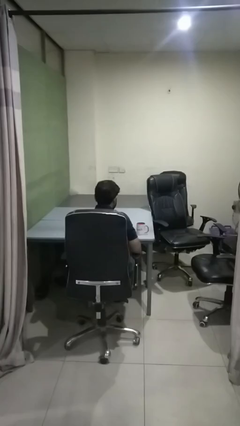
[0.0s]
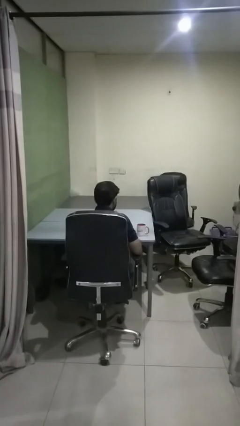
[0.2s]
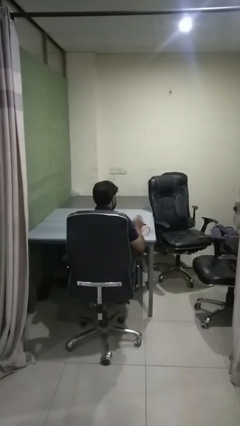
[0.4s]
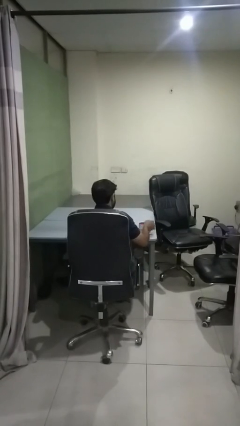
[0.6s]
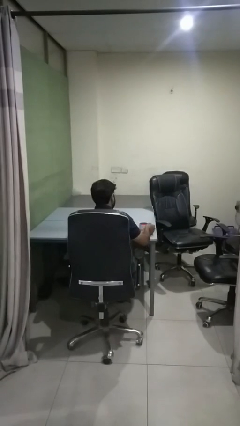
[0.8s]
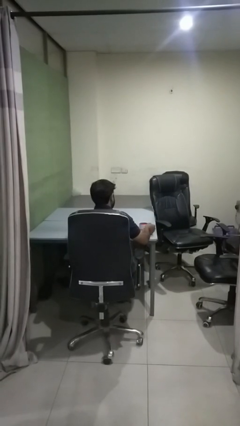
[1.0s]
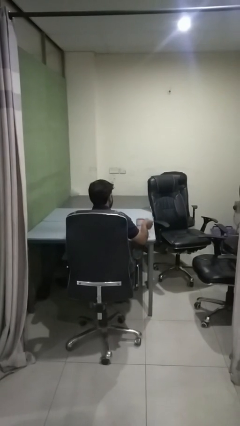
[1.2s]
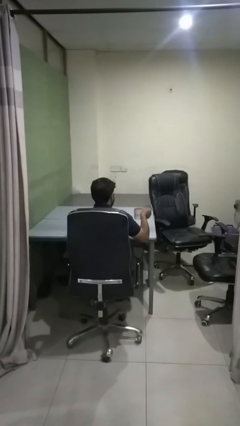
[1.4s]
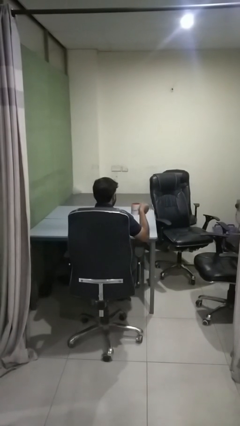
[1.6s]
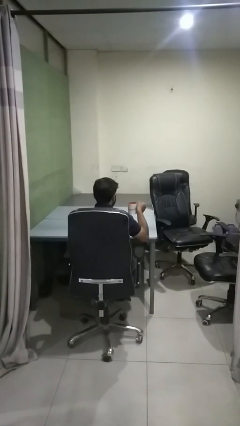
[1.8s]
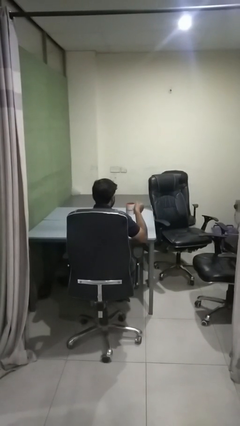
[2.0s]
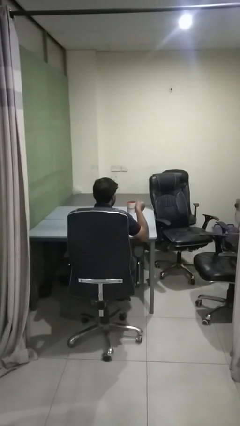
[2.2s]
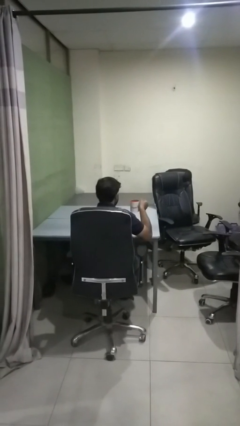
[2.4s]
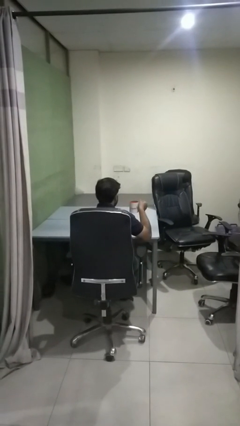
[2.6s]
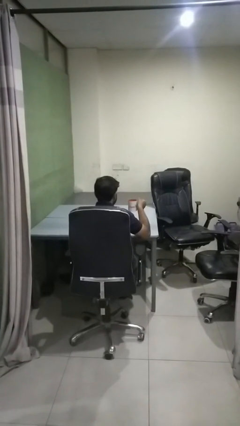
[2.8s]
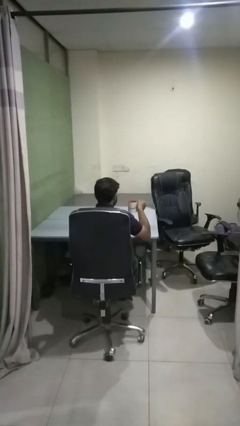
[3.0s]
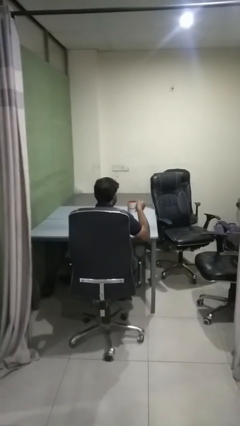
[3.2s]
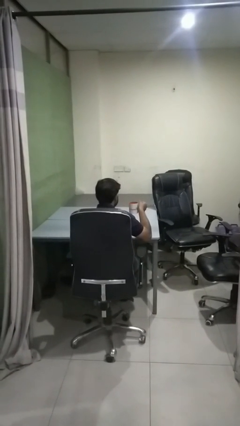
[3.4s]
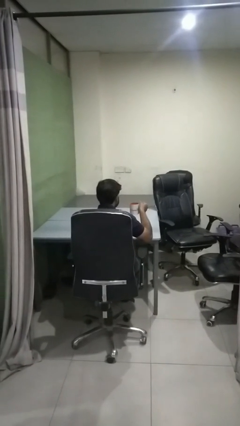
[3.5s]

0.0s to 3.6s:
person picks up object from table

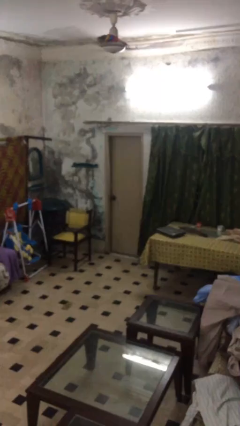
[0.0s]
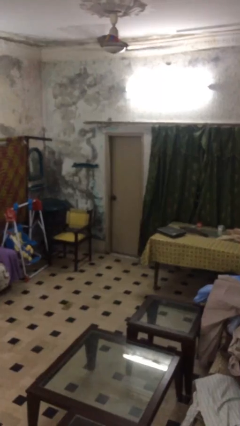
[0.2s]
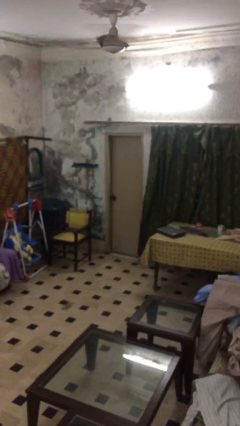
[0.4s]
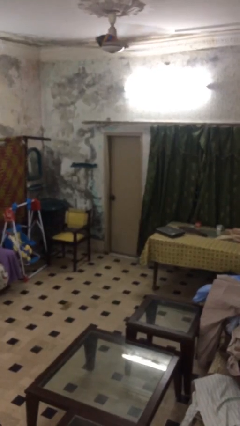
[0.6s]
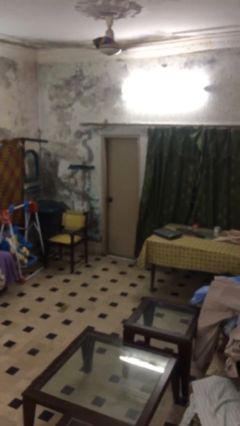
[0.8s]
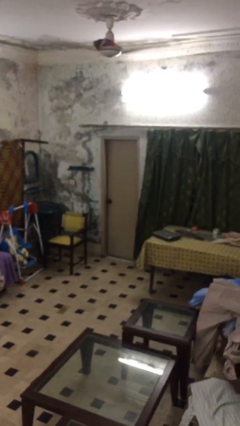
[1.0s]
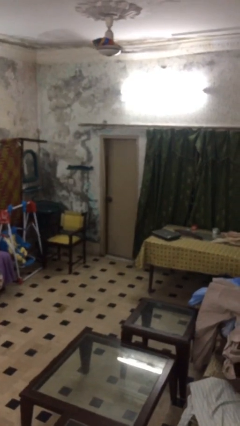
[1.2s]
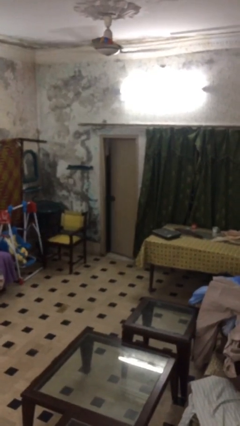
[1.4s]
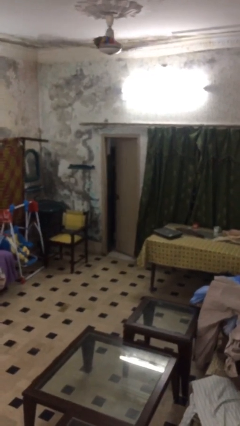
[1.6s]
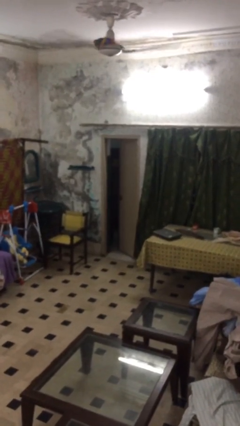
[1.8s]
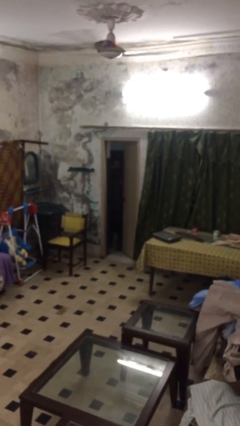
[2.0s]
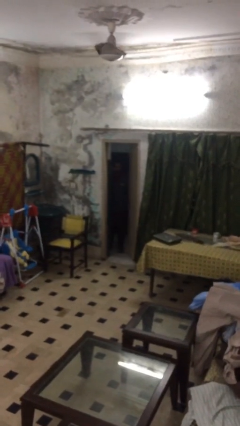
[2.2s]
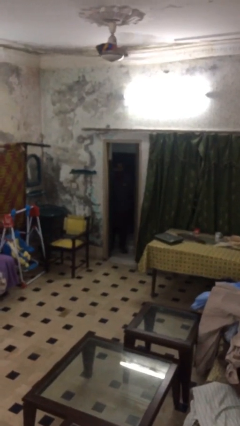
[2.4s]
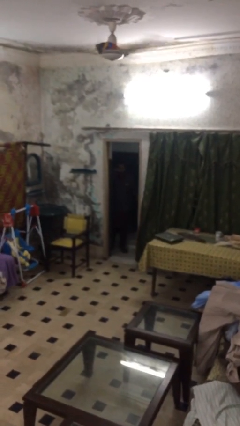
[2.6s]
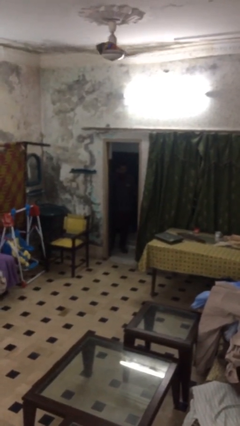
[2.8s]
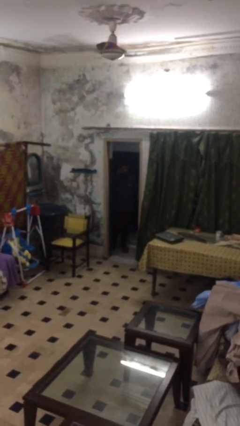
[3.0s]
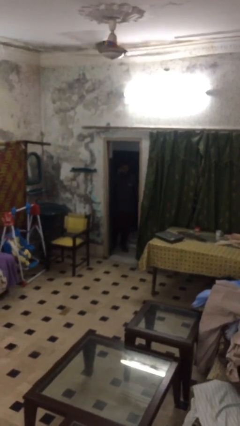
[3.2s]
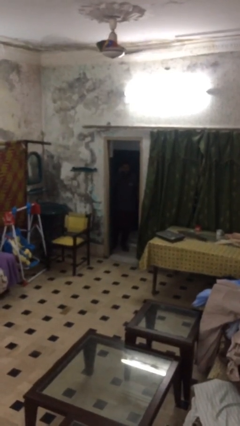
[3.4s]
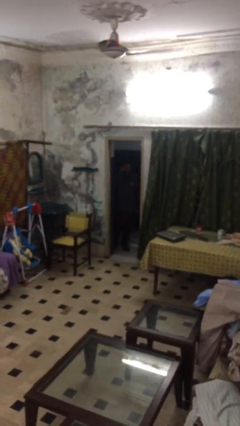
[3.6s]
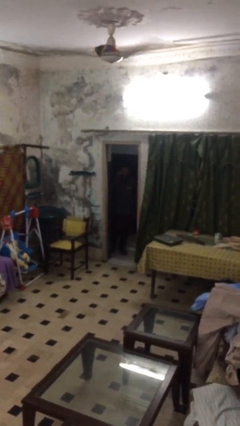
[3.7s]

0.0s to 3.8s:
person opens facility door

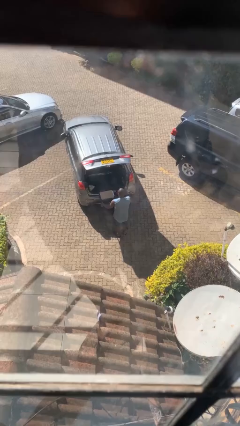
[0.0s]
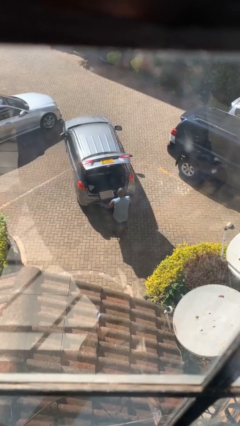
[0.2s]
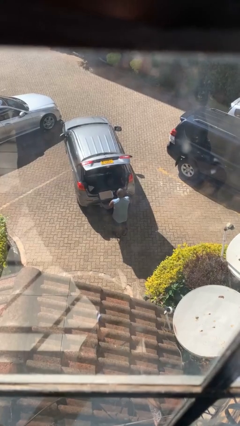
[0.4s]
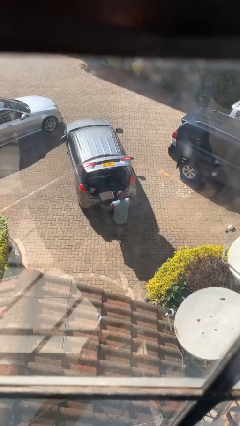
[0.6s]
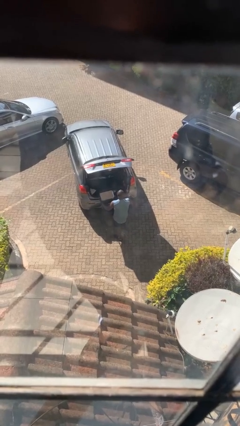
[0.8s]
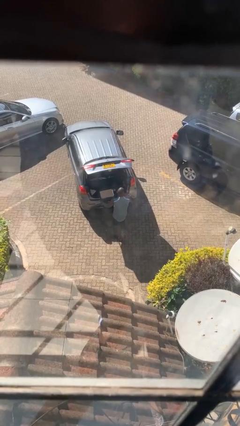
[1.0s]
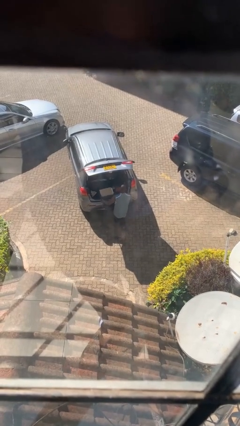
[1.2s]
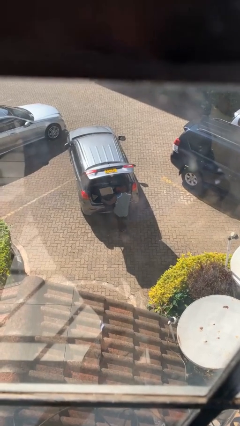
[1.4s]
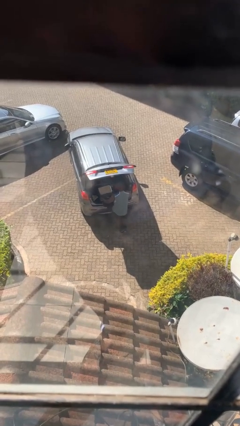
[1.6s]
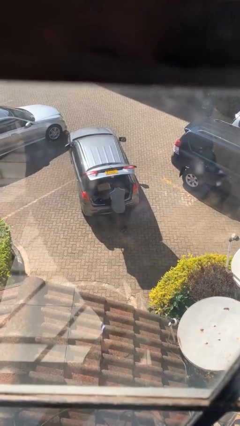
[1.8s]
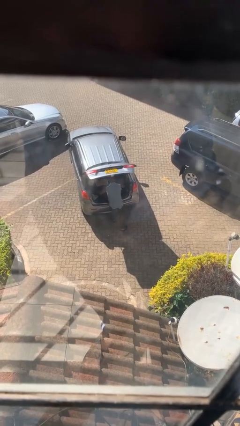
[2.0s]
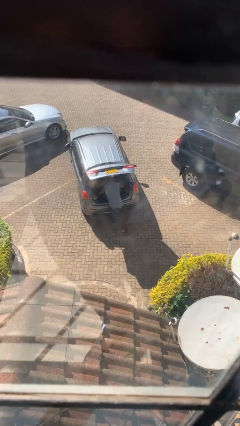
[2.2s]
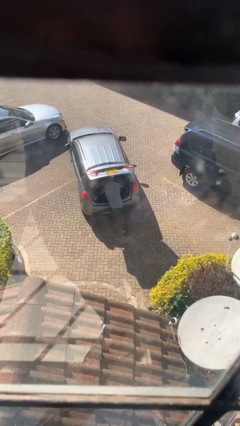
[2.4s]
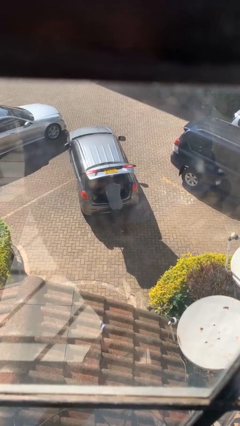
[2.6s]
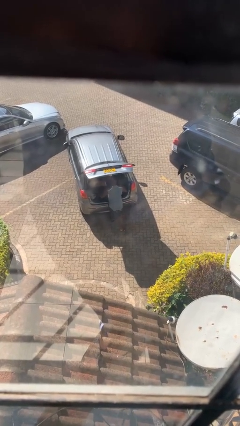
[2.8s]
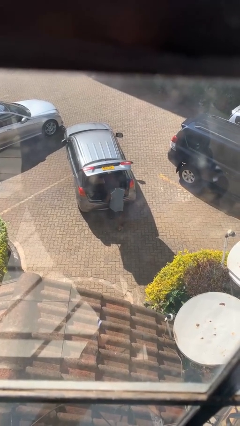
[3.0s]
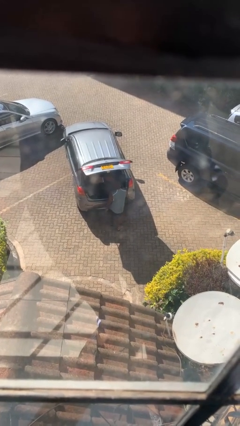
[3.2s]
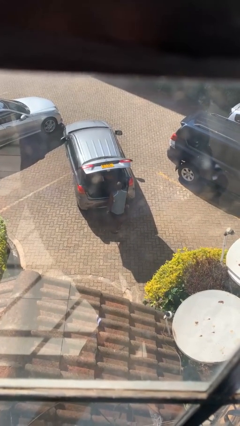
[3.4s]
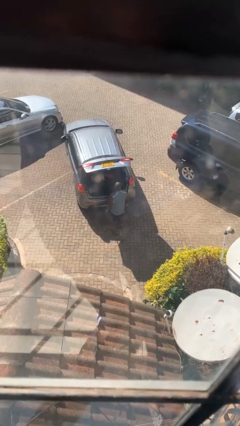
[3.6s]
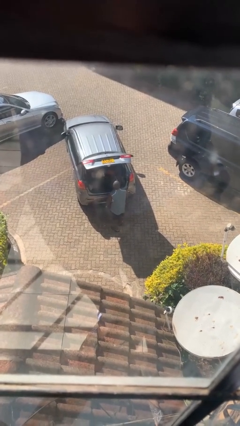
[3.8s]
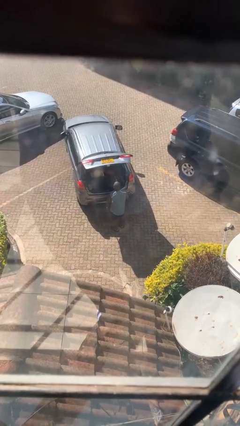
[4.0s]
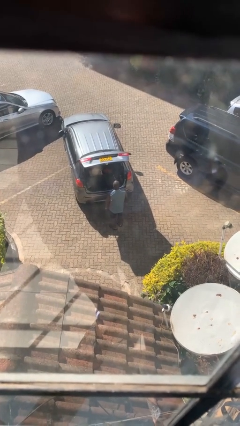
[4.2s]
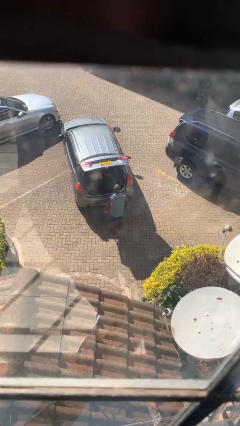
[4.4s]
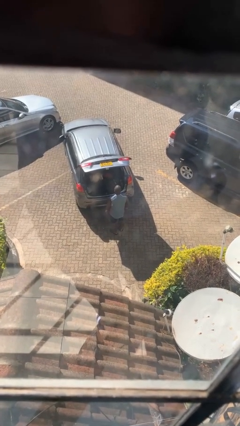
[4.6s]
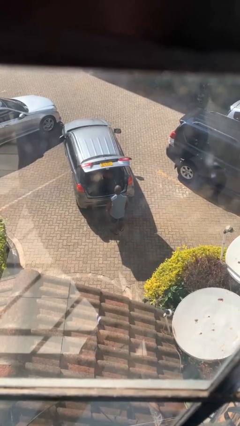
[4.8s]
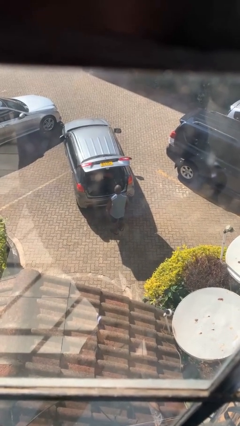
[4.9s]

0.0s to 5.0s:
person loads car

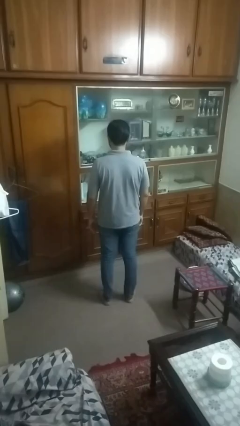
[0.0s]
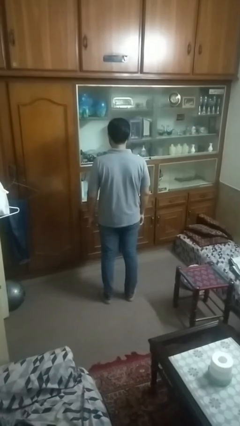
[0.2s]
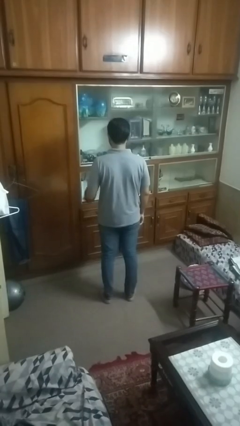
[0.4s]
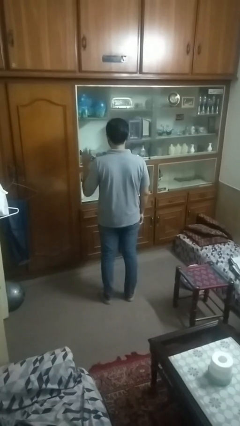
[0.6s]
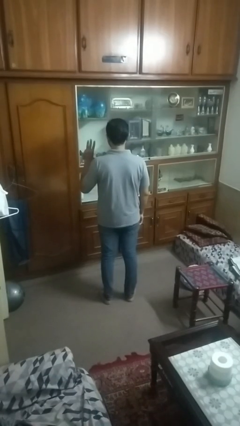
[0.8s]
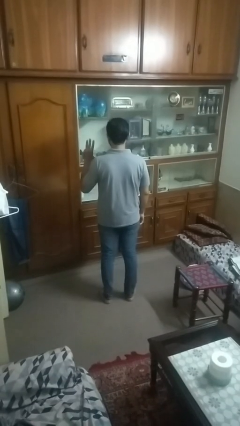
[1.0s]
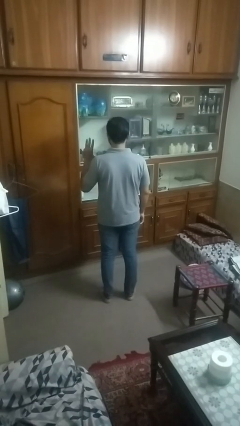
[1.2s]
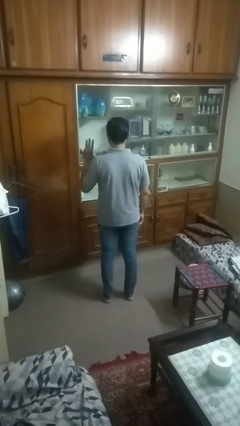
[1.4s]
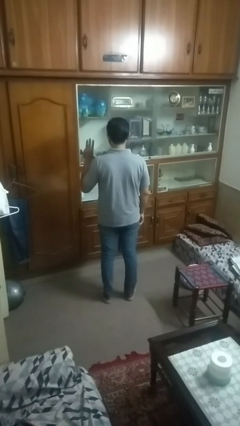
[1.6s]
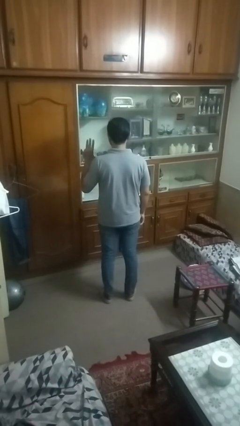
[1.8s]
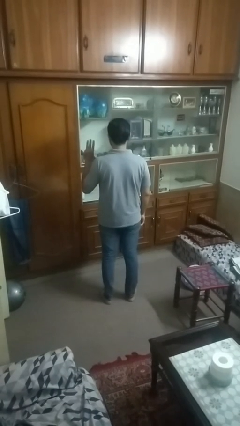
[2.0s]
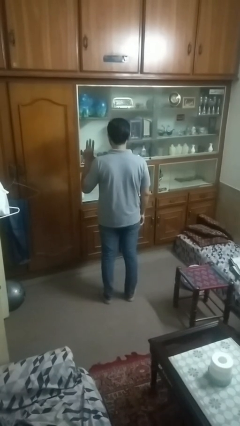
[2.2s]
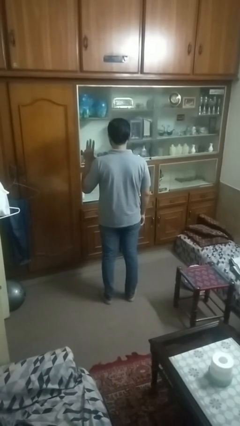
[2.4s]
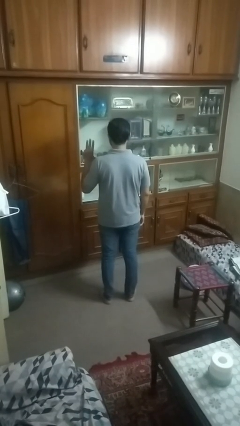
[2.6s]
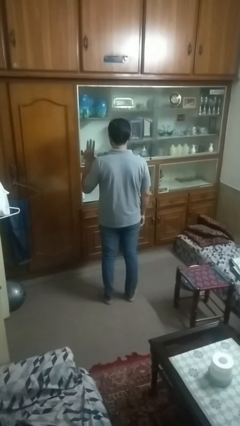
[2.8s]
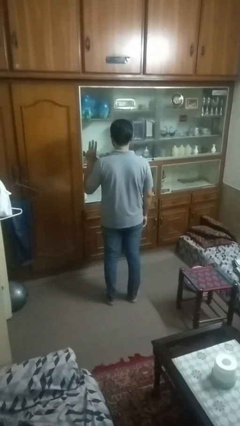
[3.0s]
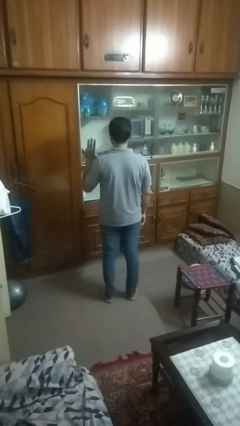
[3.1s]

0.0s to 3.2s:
person gestures number three

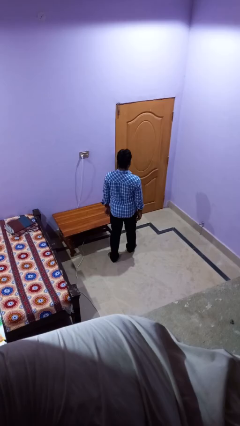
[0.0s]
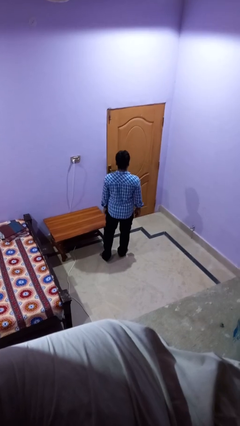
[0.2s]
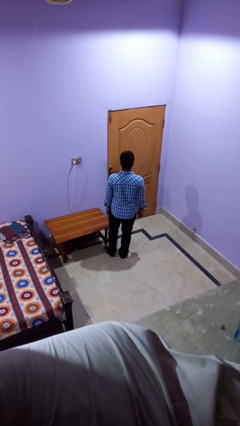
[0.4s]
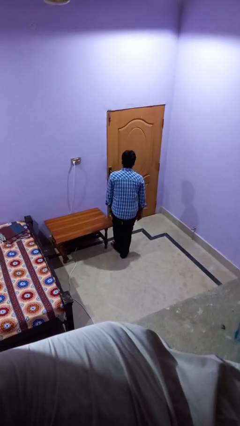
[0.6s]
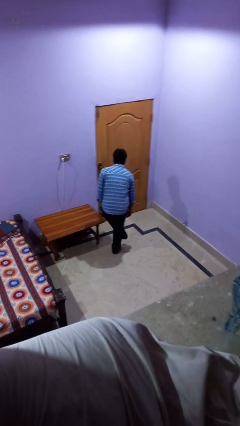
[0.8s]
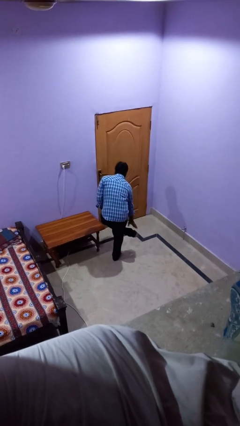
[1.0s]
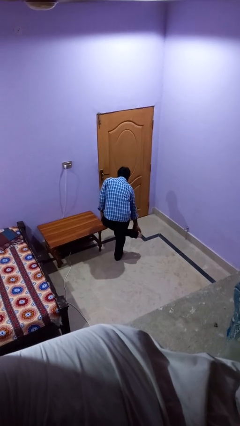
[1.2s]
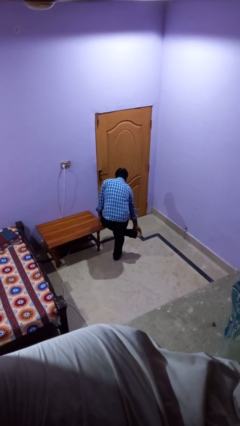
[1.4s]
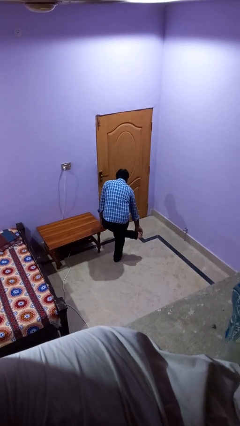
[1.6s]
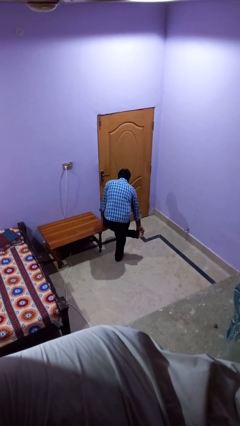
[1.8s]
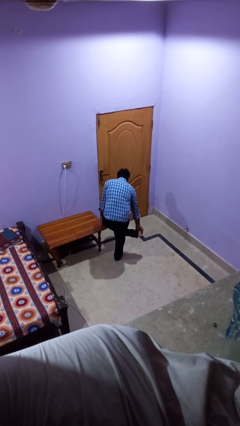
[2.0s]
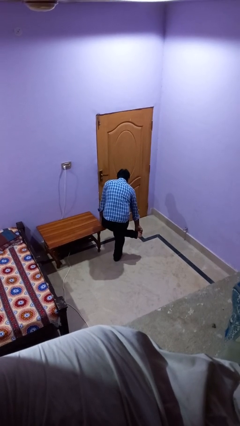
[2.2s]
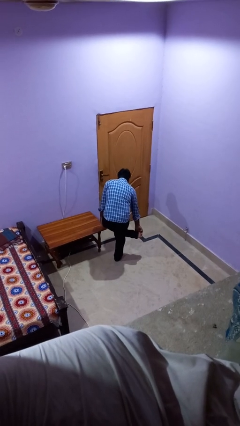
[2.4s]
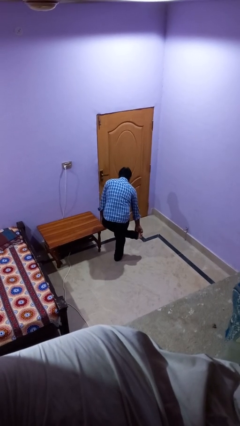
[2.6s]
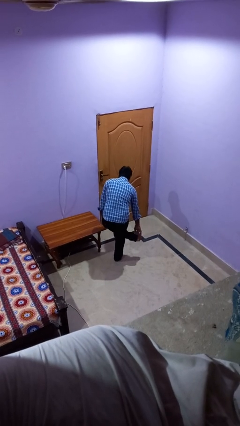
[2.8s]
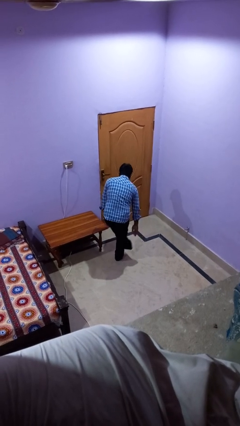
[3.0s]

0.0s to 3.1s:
person stubs toe
